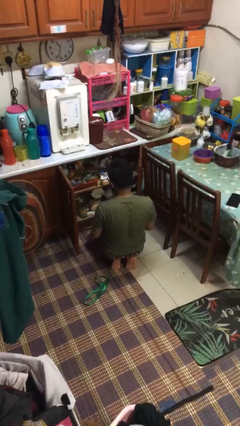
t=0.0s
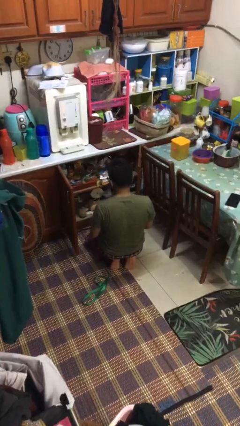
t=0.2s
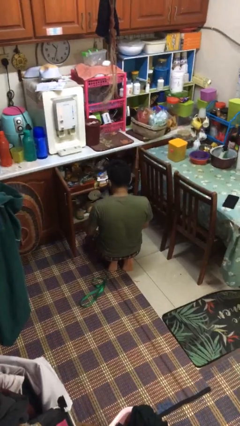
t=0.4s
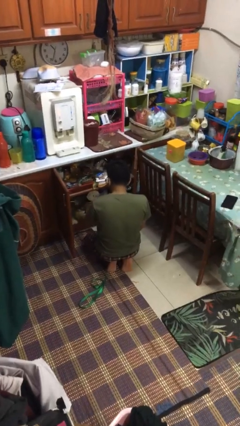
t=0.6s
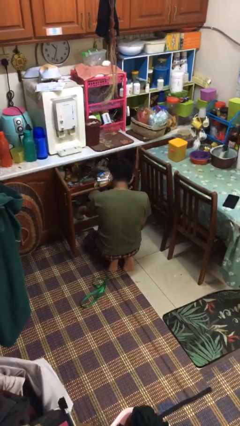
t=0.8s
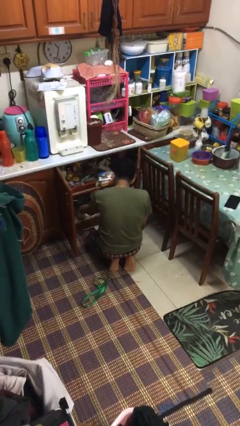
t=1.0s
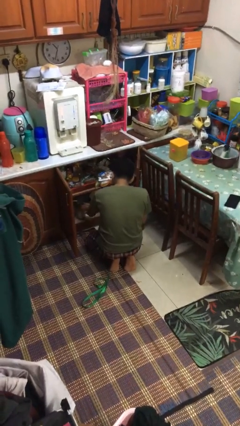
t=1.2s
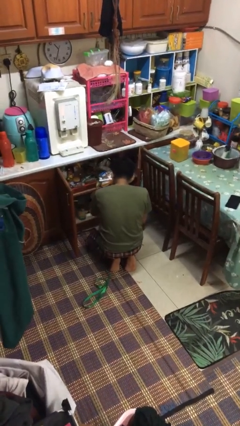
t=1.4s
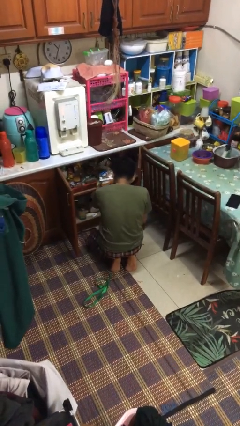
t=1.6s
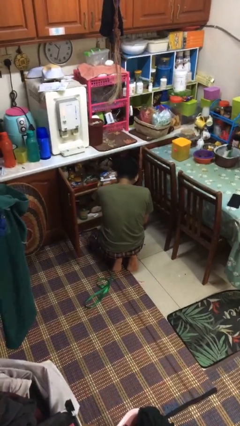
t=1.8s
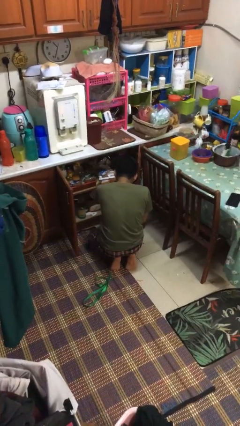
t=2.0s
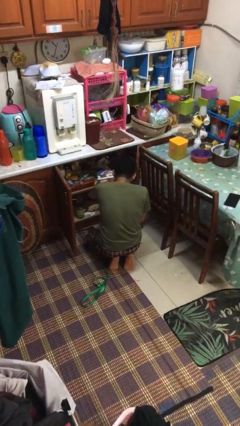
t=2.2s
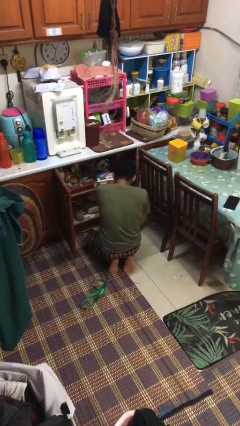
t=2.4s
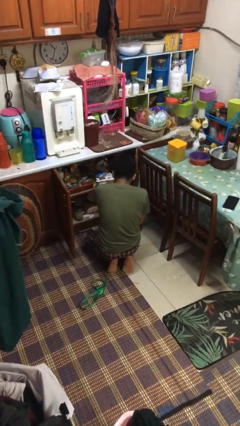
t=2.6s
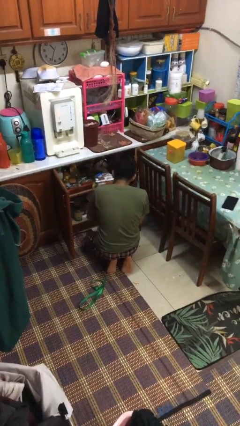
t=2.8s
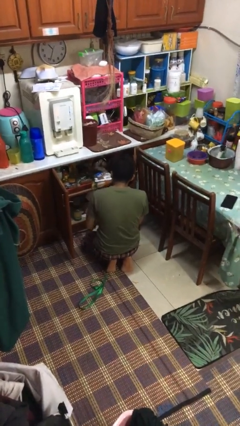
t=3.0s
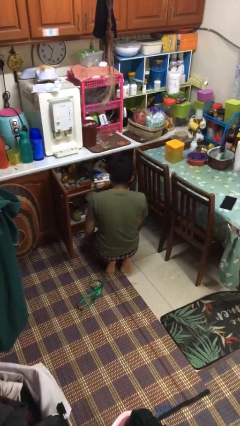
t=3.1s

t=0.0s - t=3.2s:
person searches in kitchen drawer

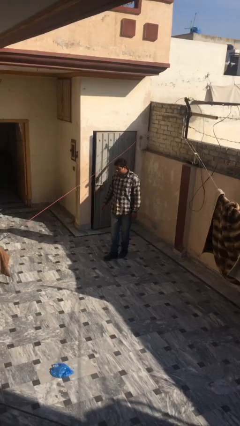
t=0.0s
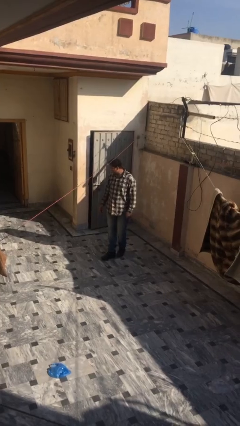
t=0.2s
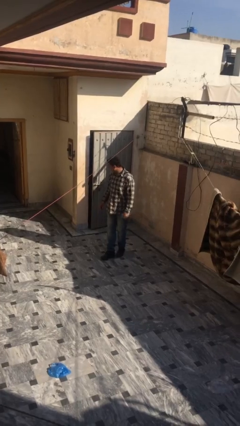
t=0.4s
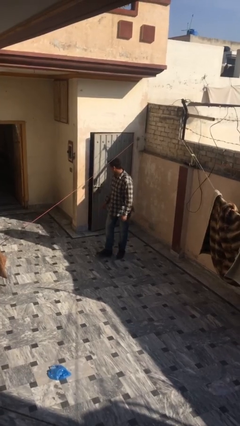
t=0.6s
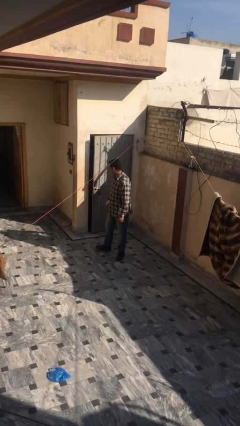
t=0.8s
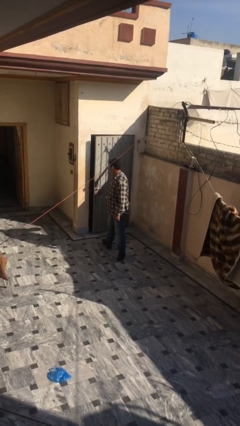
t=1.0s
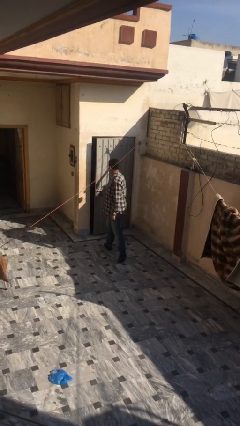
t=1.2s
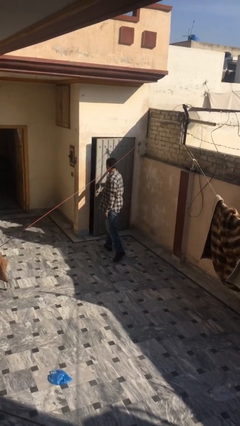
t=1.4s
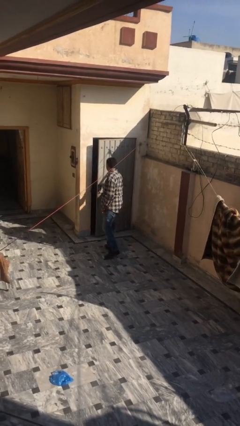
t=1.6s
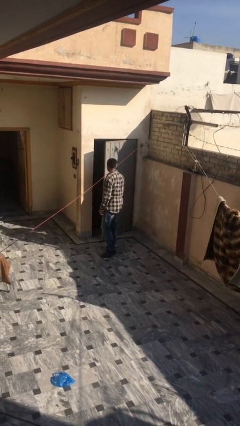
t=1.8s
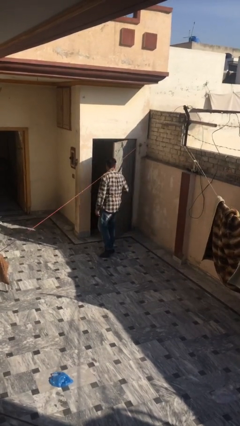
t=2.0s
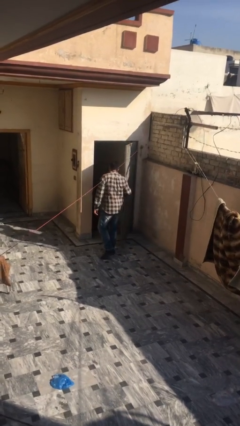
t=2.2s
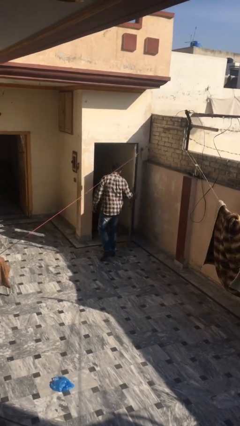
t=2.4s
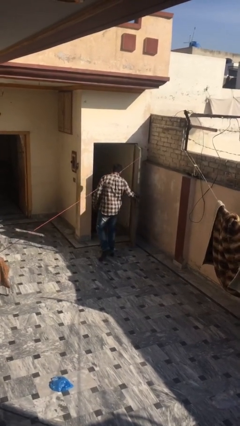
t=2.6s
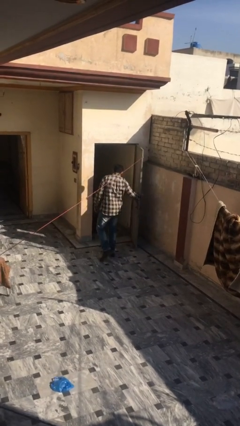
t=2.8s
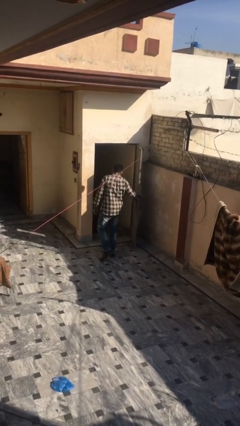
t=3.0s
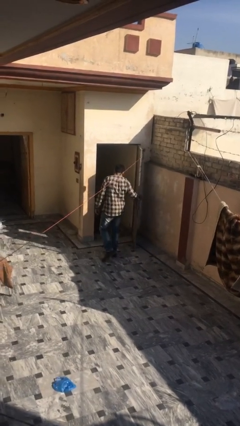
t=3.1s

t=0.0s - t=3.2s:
person opens facility door

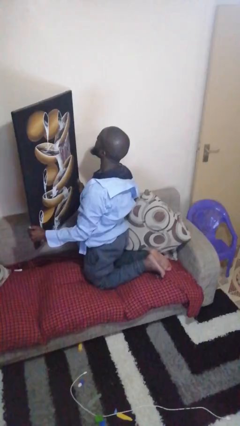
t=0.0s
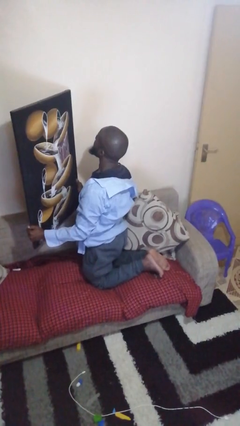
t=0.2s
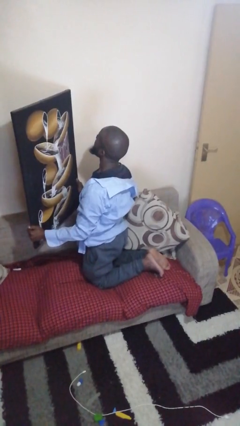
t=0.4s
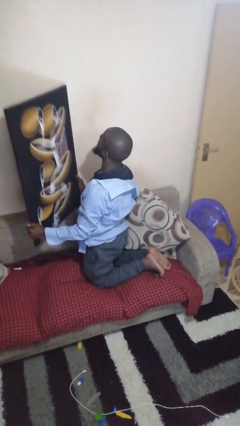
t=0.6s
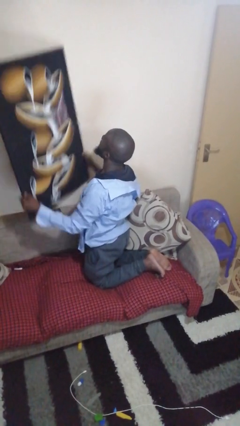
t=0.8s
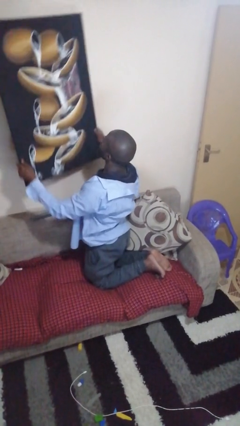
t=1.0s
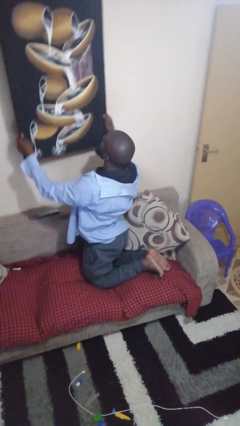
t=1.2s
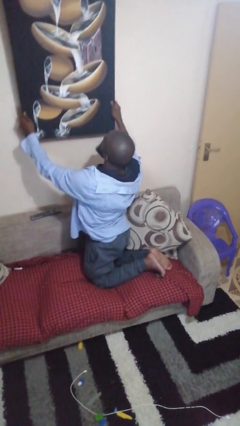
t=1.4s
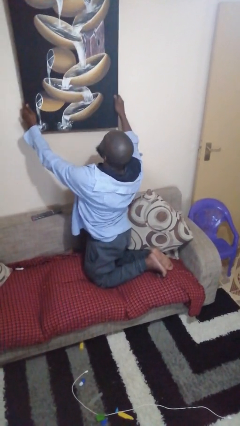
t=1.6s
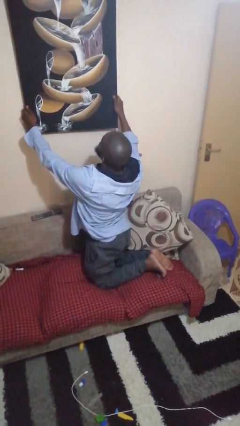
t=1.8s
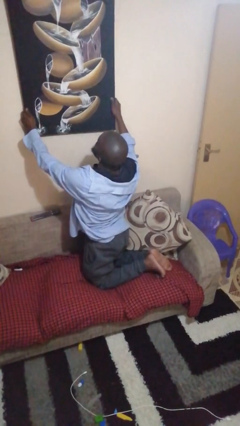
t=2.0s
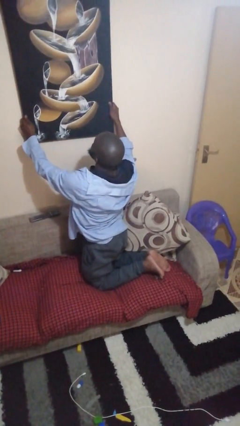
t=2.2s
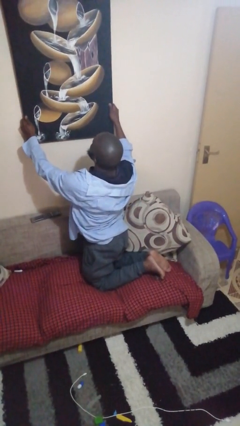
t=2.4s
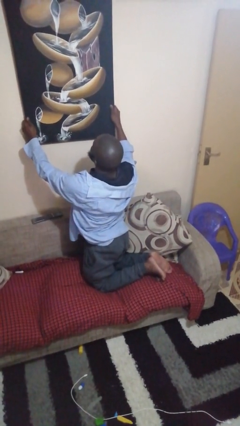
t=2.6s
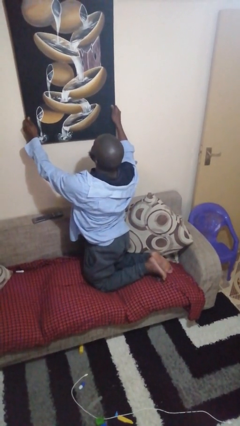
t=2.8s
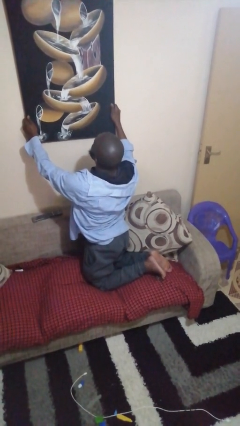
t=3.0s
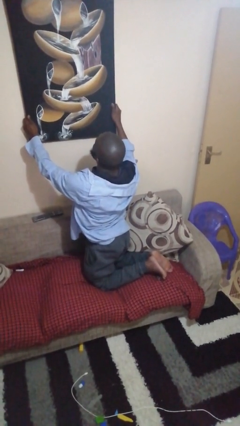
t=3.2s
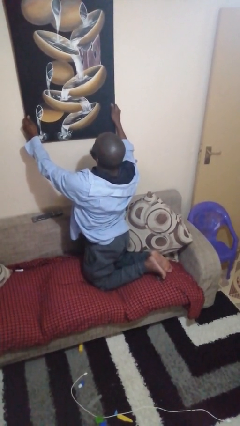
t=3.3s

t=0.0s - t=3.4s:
person puts up picture frame

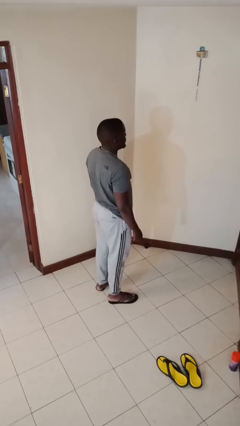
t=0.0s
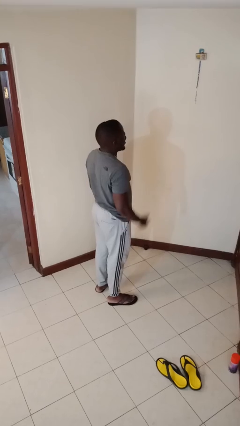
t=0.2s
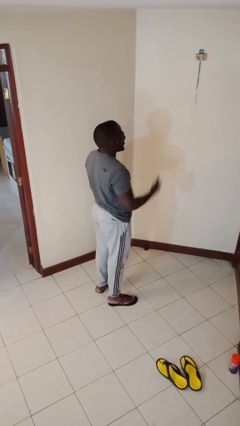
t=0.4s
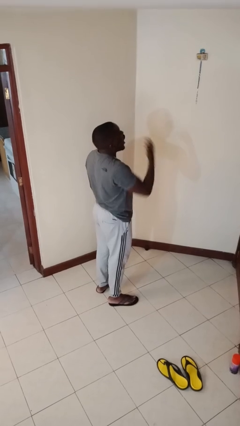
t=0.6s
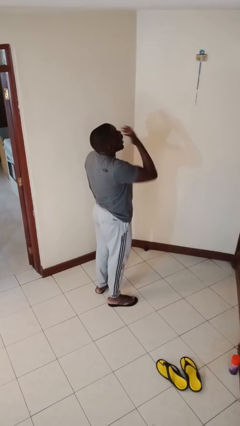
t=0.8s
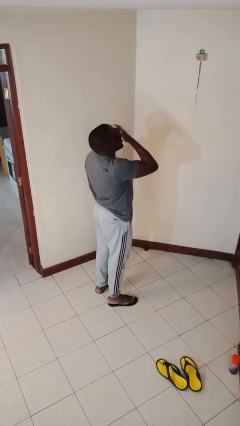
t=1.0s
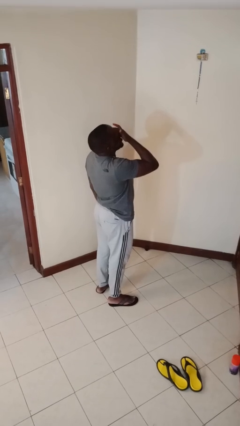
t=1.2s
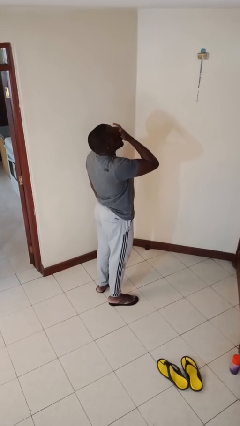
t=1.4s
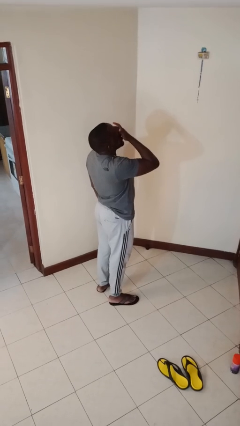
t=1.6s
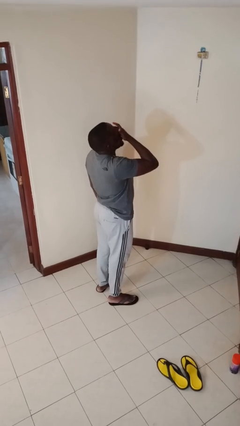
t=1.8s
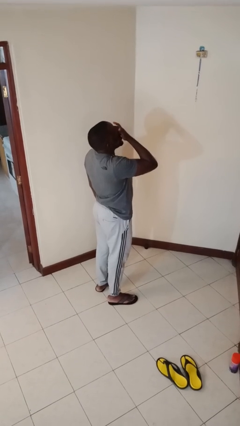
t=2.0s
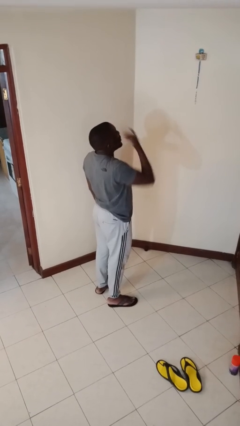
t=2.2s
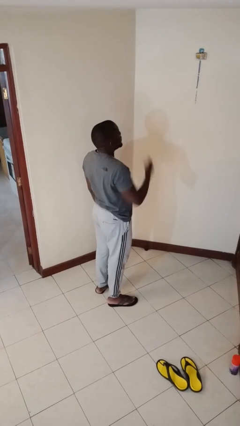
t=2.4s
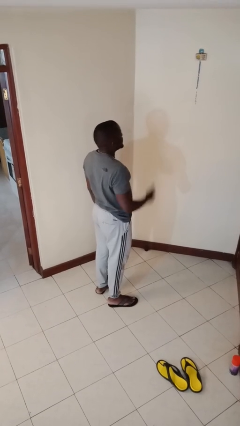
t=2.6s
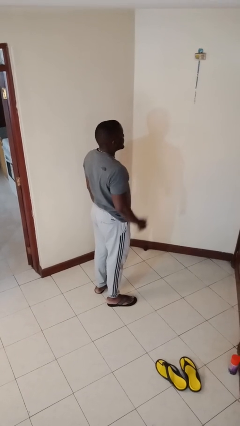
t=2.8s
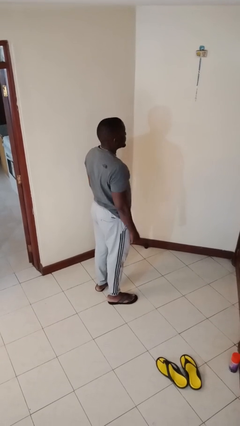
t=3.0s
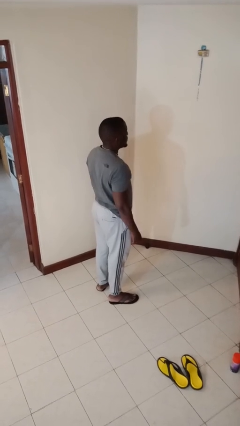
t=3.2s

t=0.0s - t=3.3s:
person yawns

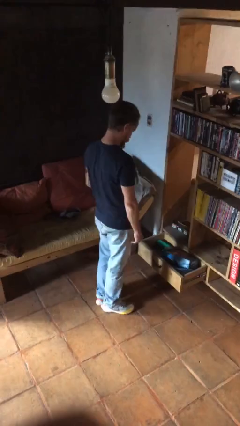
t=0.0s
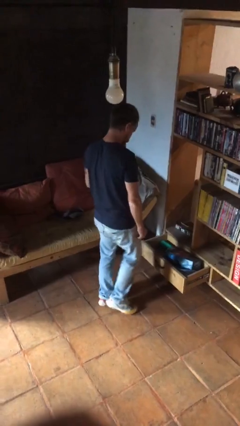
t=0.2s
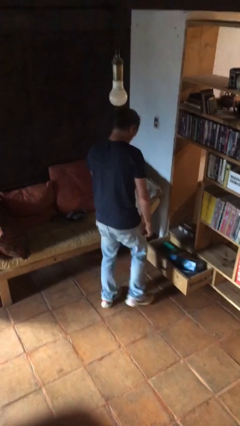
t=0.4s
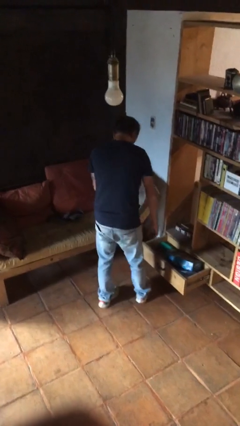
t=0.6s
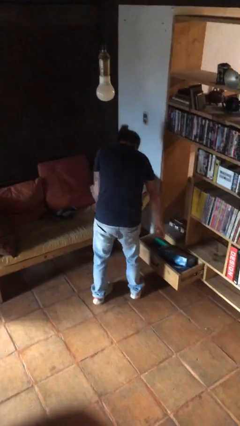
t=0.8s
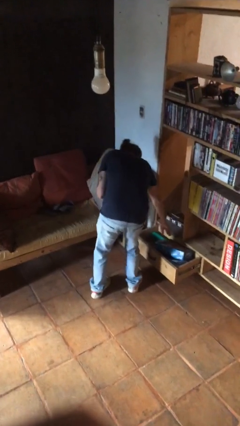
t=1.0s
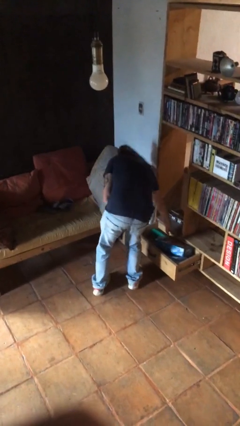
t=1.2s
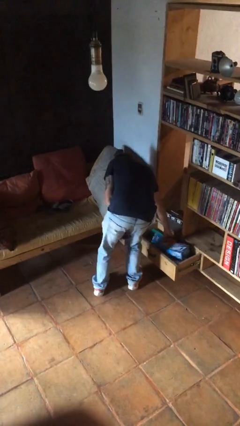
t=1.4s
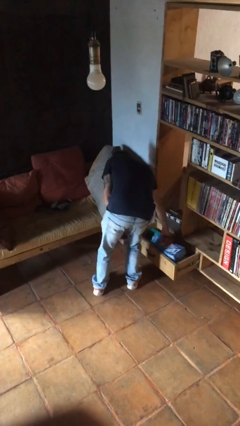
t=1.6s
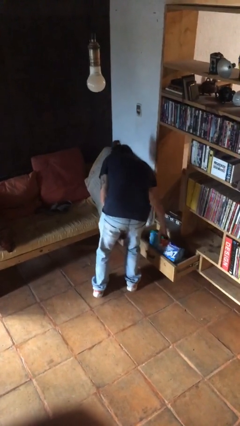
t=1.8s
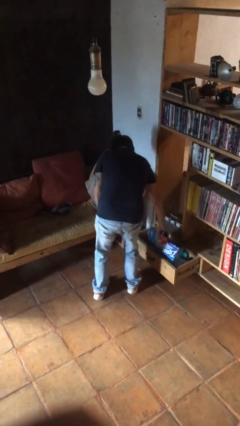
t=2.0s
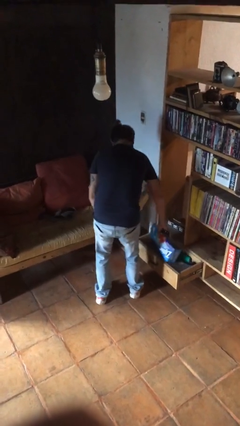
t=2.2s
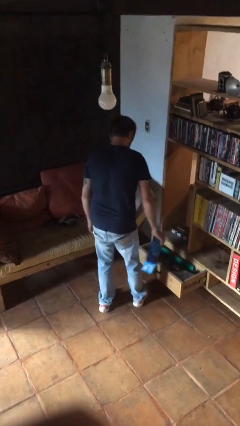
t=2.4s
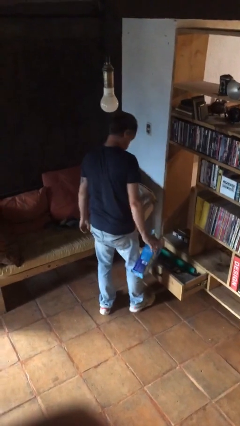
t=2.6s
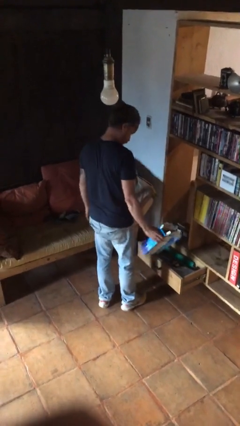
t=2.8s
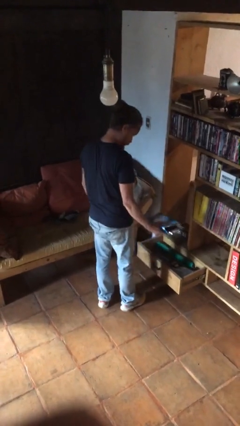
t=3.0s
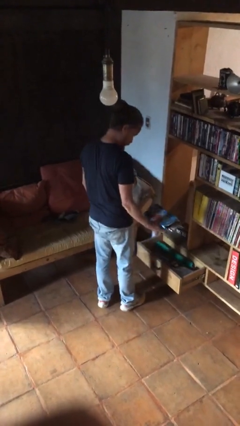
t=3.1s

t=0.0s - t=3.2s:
person picks up object from cabinet

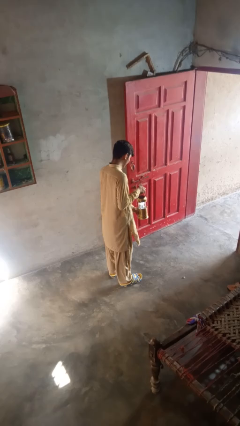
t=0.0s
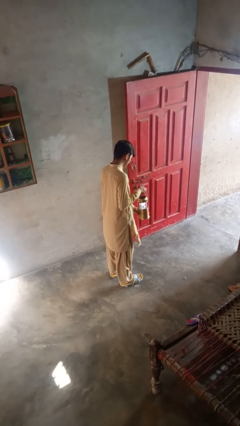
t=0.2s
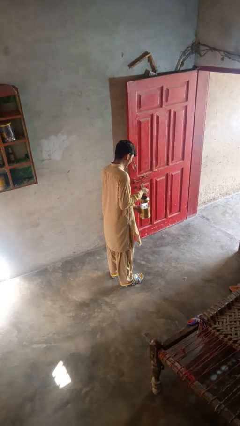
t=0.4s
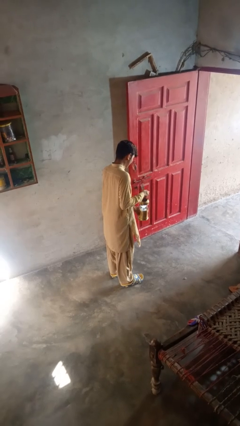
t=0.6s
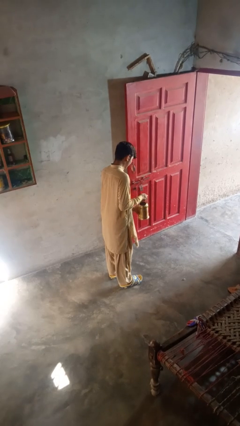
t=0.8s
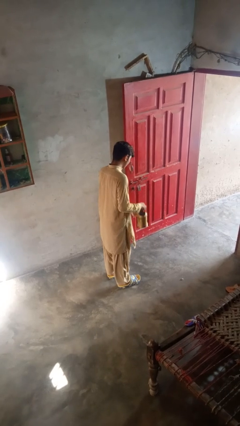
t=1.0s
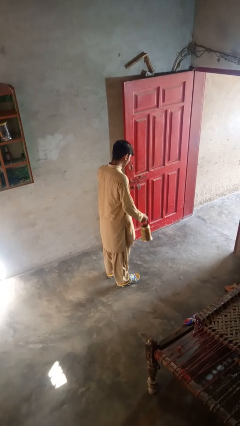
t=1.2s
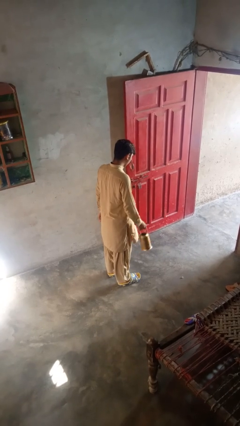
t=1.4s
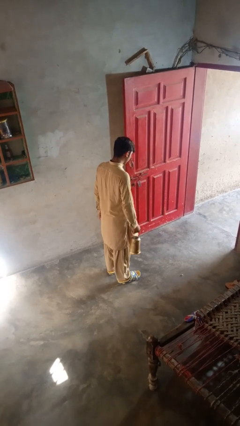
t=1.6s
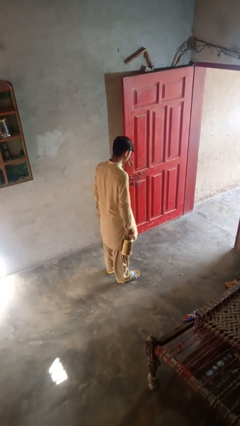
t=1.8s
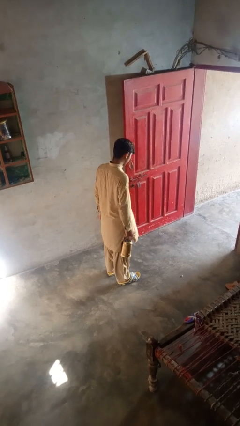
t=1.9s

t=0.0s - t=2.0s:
person turns off lamp
